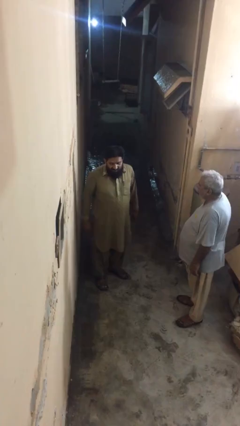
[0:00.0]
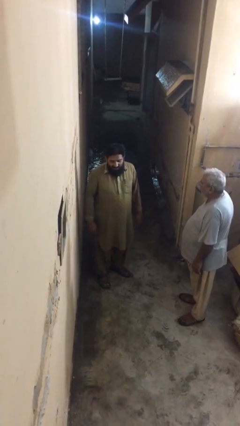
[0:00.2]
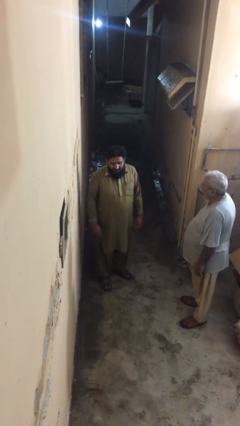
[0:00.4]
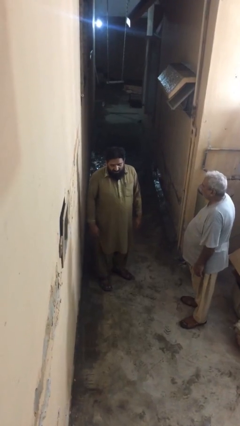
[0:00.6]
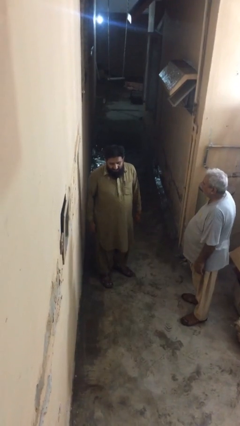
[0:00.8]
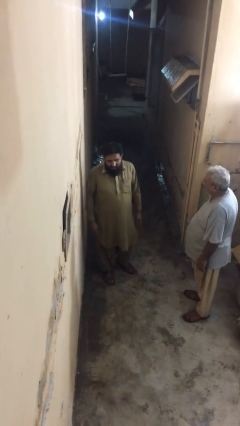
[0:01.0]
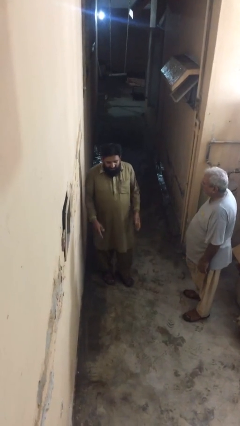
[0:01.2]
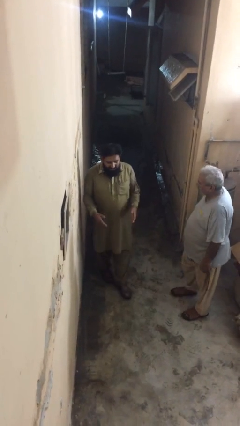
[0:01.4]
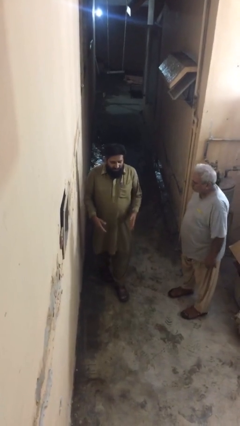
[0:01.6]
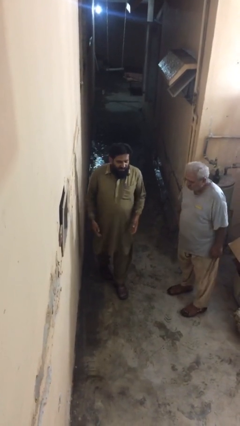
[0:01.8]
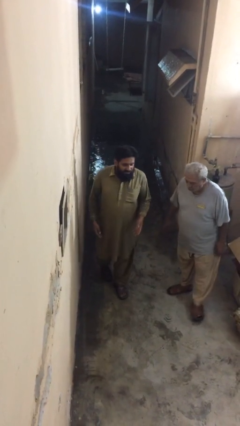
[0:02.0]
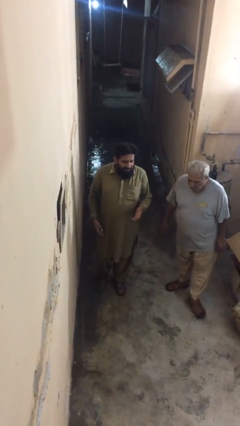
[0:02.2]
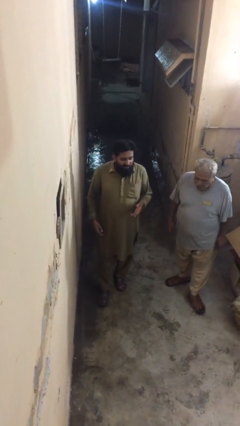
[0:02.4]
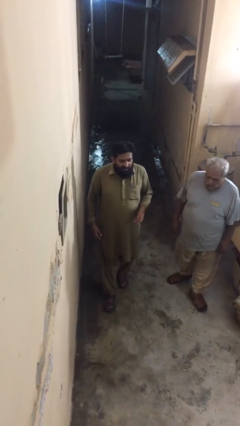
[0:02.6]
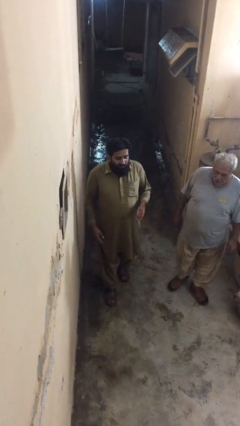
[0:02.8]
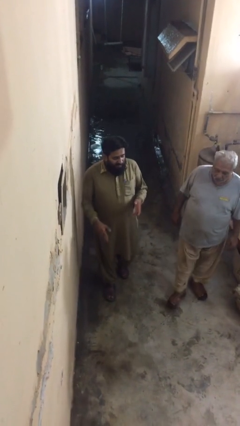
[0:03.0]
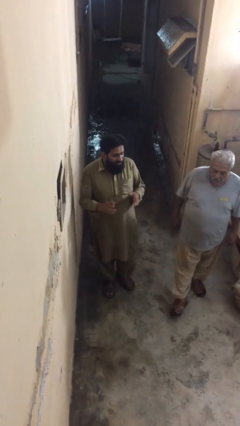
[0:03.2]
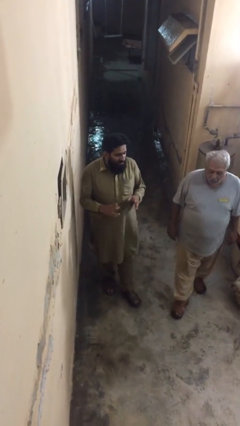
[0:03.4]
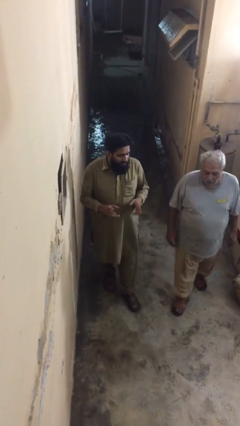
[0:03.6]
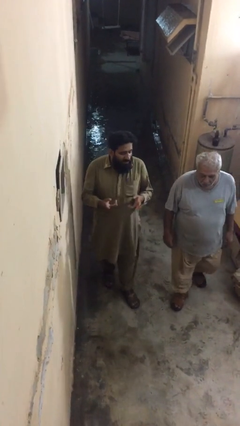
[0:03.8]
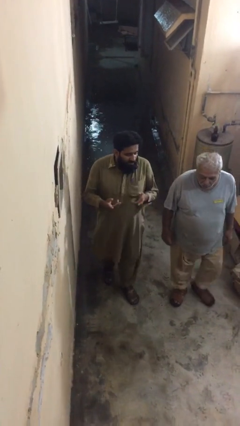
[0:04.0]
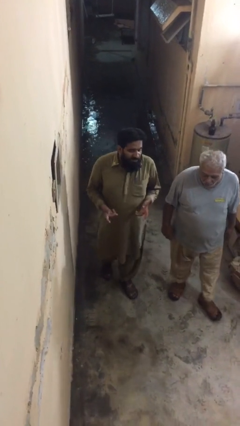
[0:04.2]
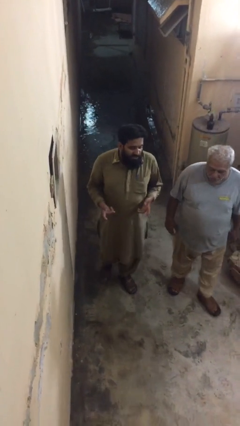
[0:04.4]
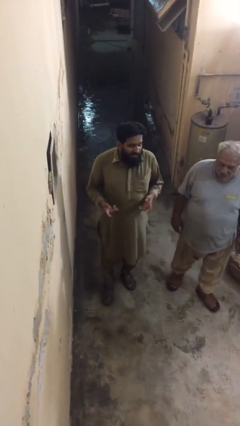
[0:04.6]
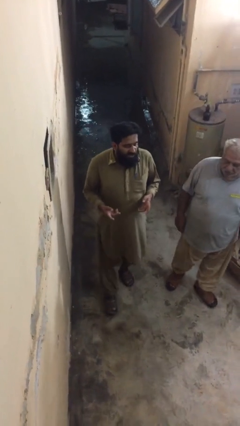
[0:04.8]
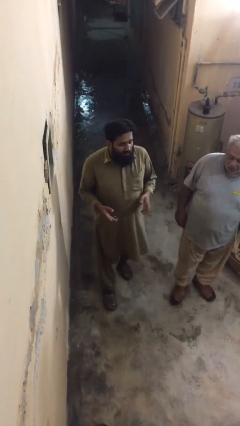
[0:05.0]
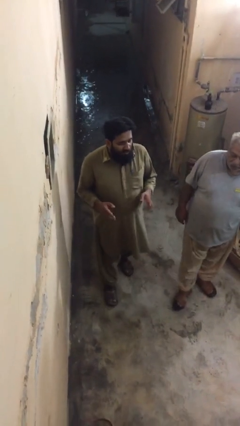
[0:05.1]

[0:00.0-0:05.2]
person talks to person

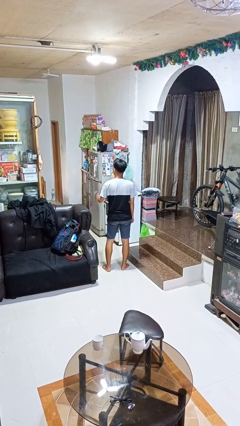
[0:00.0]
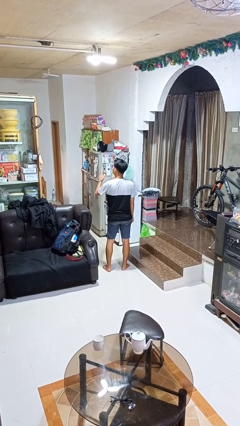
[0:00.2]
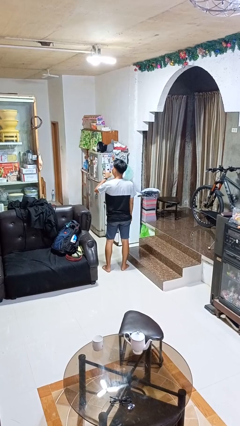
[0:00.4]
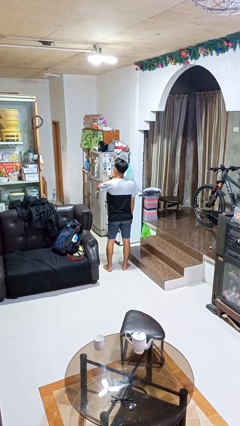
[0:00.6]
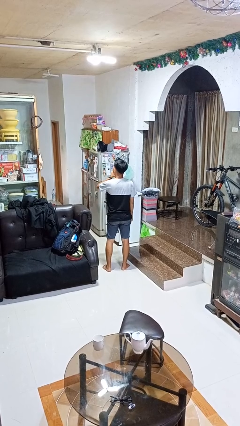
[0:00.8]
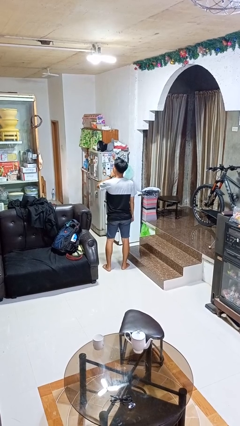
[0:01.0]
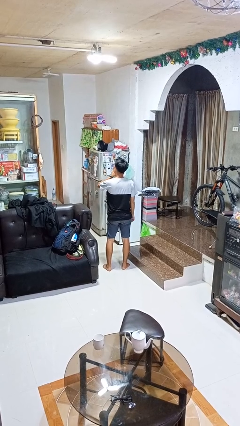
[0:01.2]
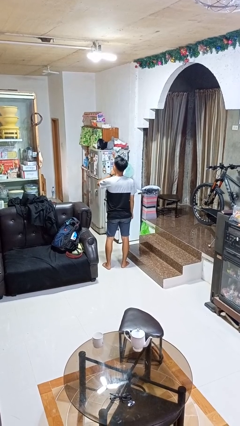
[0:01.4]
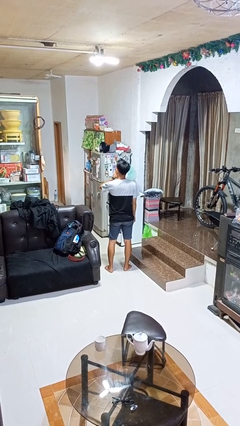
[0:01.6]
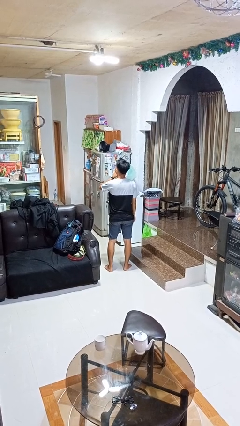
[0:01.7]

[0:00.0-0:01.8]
person gestures be quiet

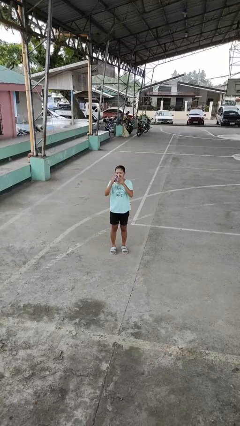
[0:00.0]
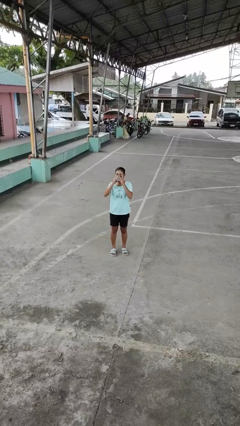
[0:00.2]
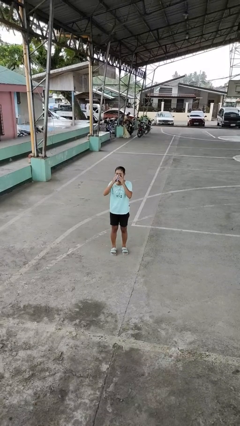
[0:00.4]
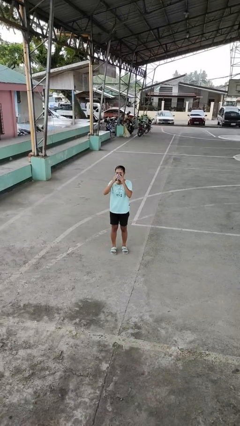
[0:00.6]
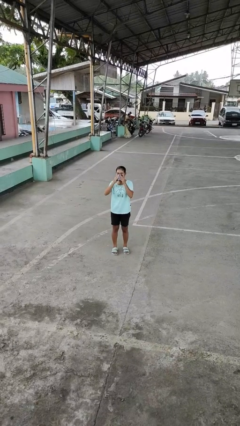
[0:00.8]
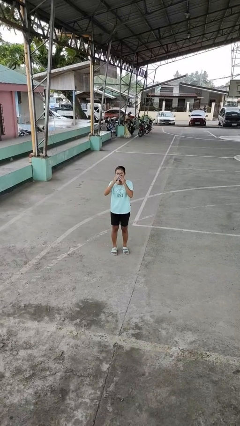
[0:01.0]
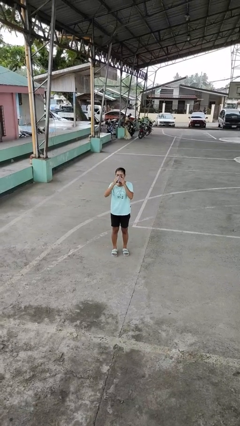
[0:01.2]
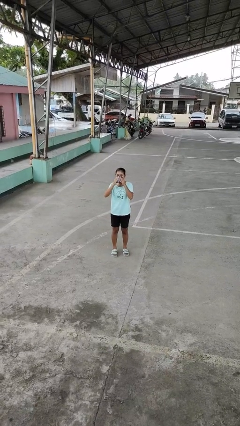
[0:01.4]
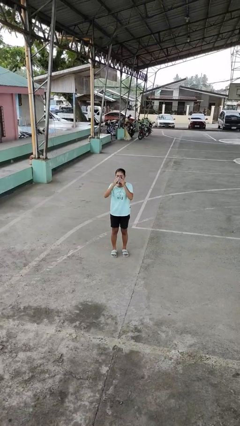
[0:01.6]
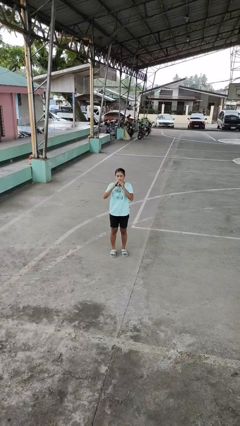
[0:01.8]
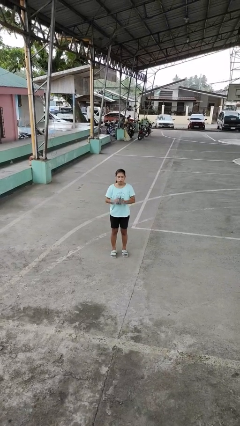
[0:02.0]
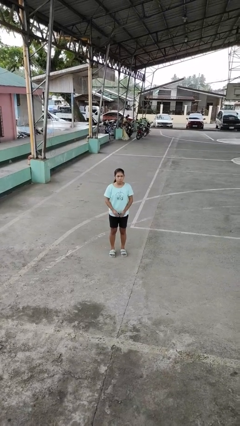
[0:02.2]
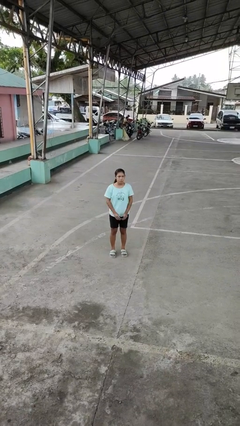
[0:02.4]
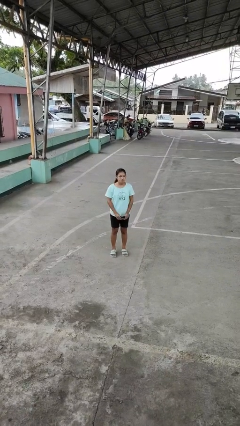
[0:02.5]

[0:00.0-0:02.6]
person blows nose

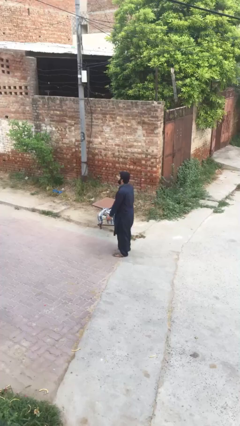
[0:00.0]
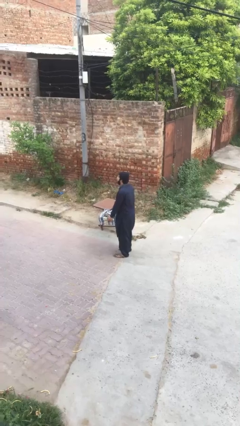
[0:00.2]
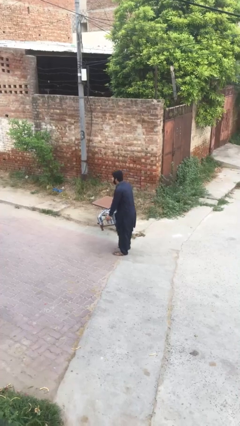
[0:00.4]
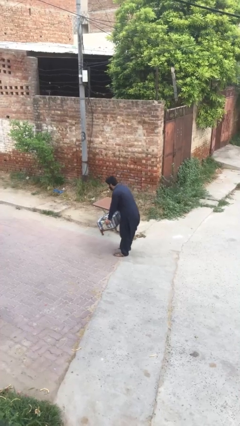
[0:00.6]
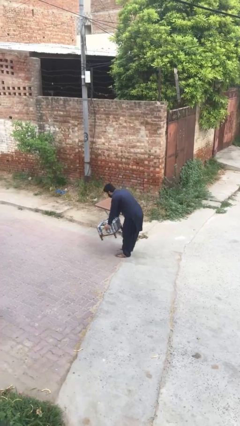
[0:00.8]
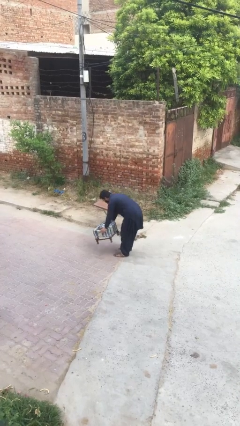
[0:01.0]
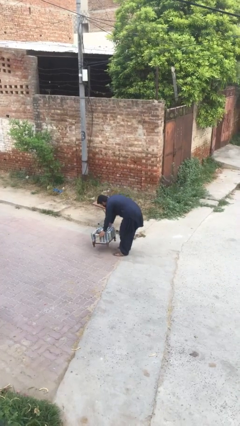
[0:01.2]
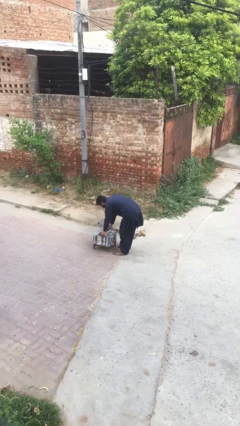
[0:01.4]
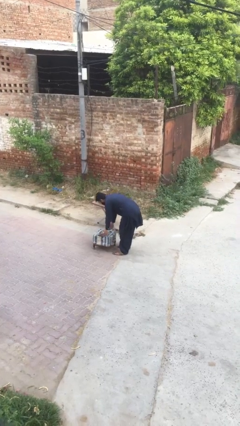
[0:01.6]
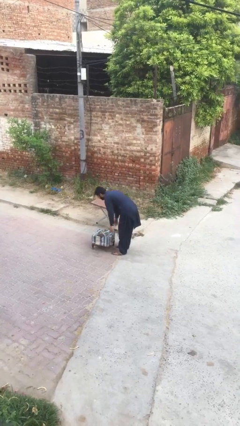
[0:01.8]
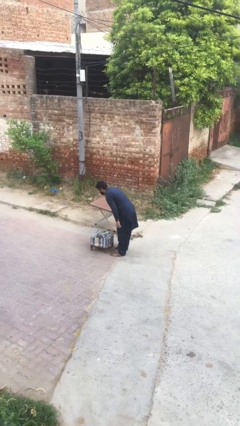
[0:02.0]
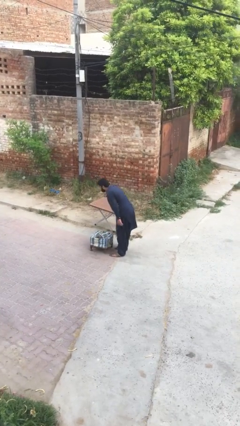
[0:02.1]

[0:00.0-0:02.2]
person puts down object on floor

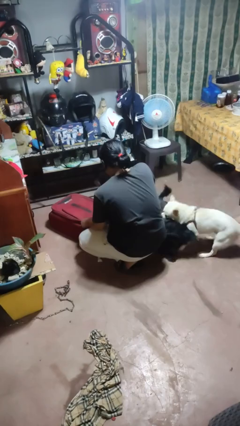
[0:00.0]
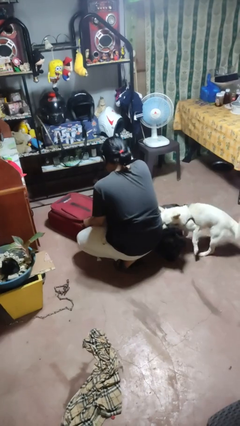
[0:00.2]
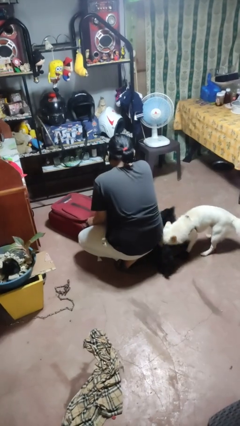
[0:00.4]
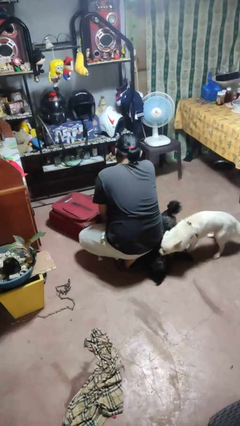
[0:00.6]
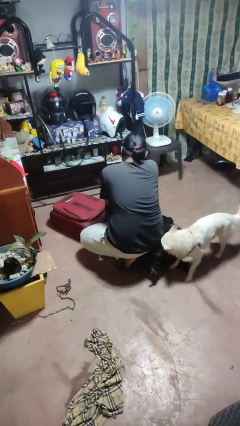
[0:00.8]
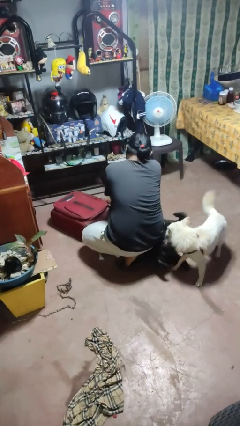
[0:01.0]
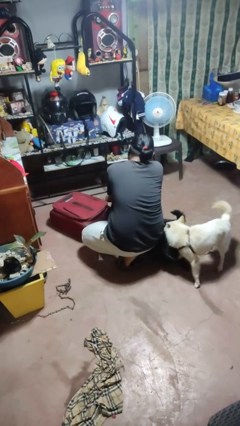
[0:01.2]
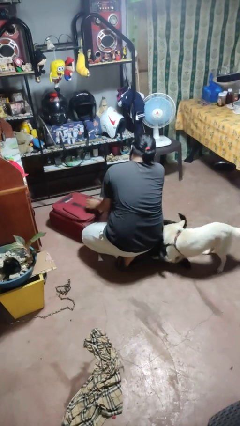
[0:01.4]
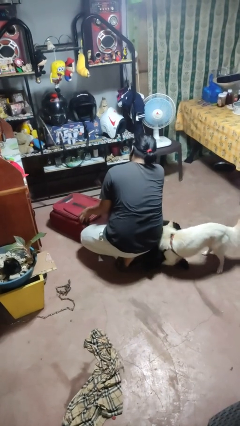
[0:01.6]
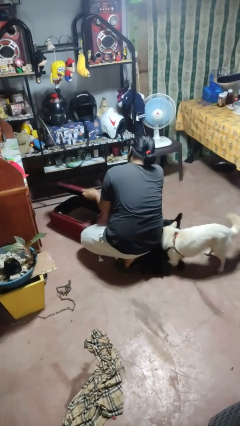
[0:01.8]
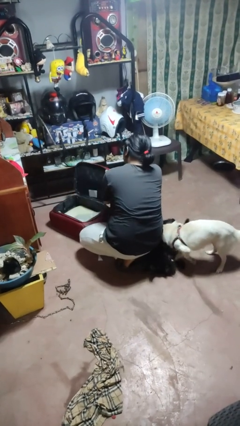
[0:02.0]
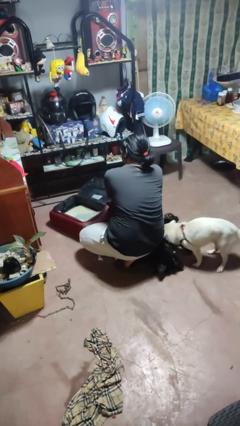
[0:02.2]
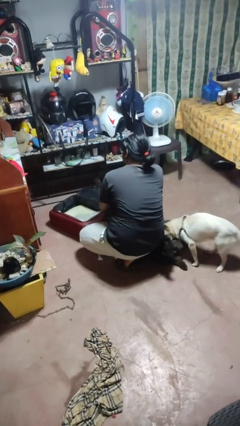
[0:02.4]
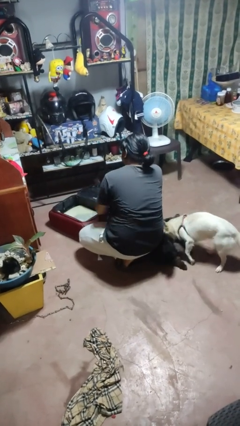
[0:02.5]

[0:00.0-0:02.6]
person opens suitcase

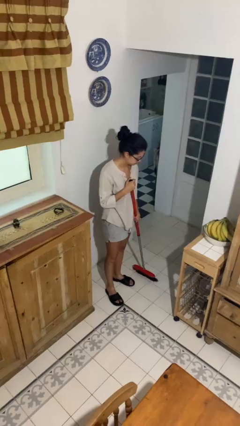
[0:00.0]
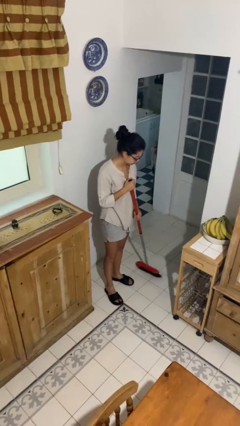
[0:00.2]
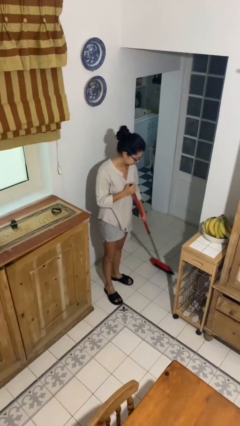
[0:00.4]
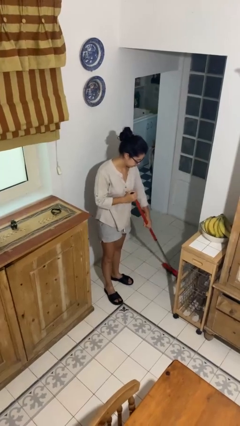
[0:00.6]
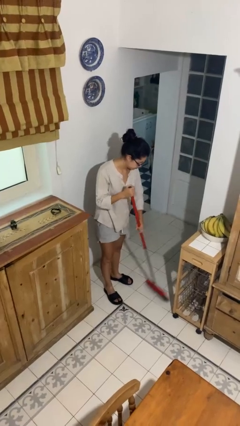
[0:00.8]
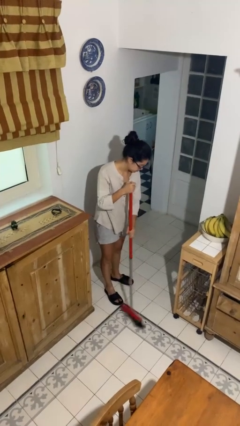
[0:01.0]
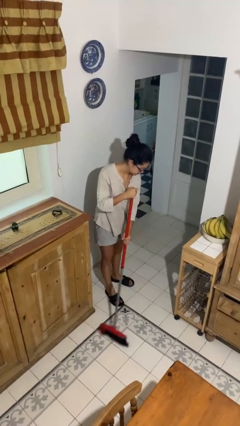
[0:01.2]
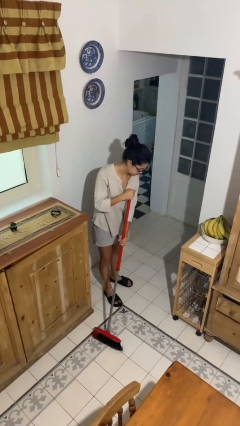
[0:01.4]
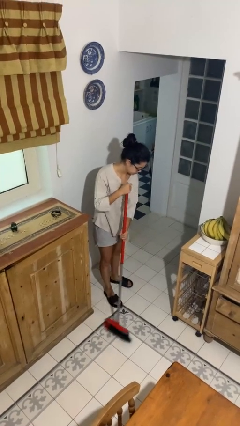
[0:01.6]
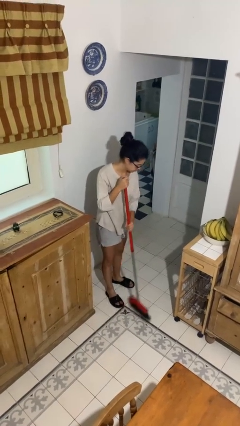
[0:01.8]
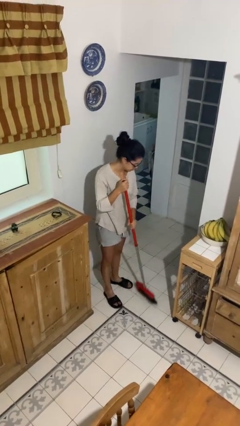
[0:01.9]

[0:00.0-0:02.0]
person sweeps floor

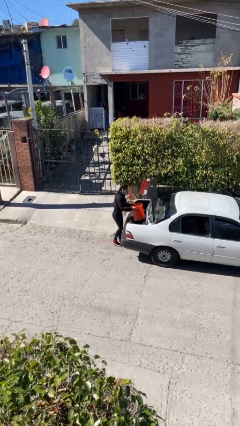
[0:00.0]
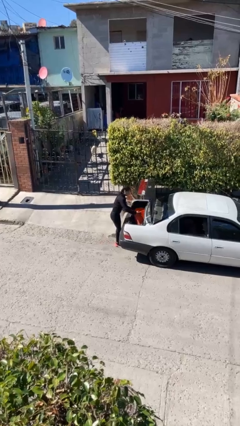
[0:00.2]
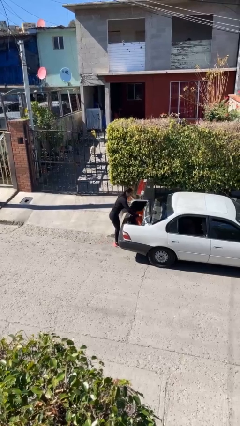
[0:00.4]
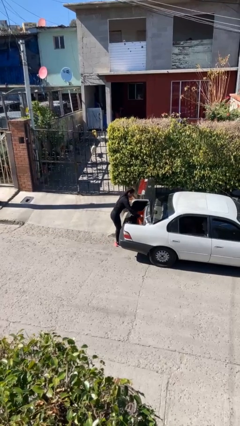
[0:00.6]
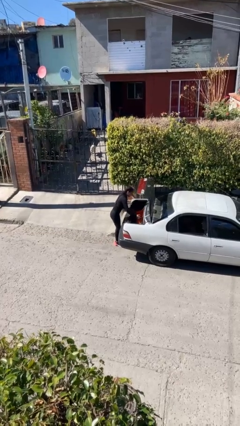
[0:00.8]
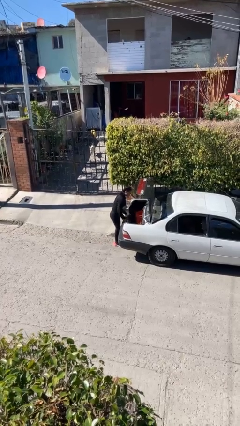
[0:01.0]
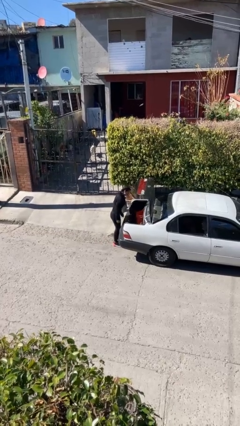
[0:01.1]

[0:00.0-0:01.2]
person loads car
